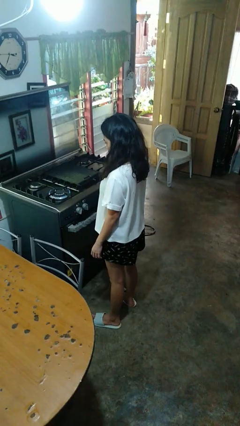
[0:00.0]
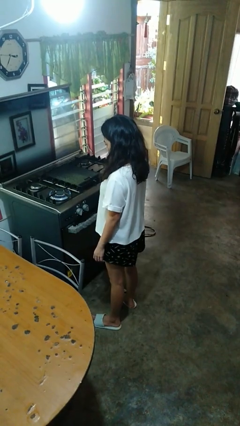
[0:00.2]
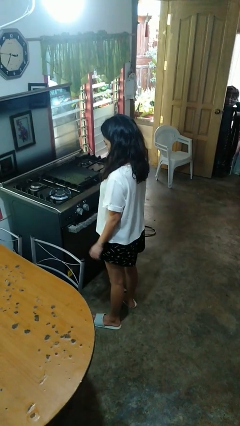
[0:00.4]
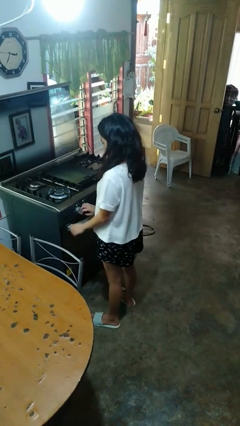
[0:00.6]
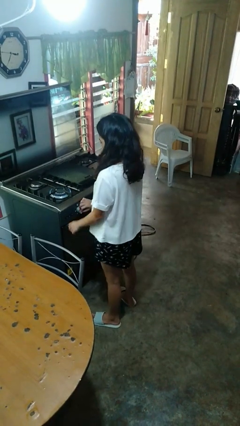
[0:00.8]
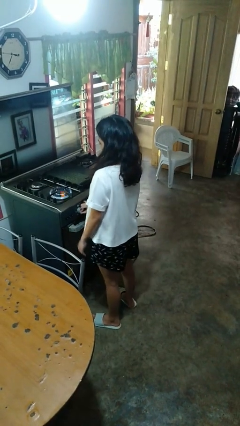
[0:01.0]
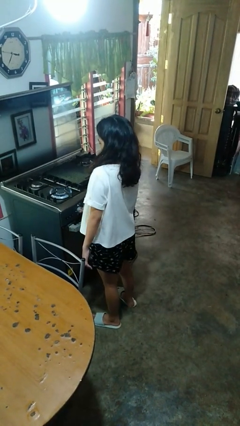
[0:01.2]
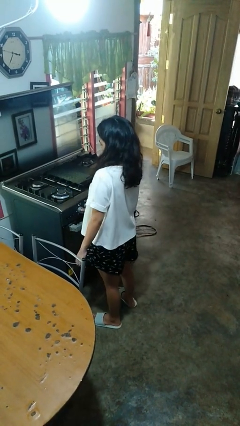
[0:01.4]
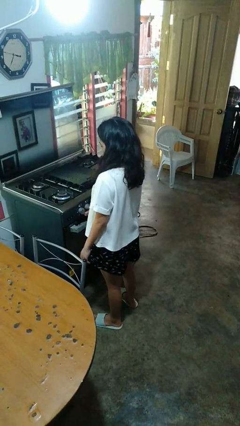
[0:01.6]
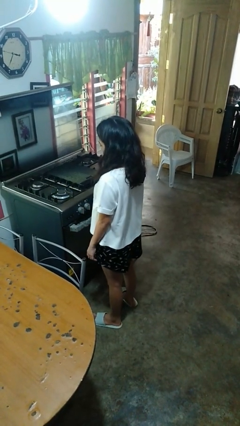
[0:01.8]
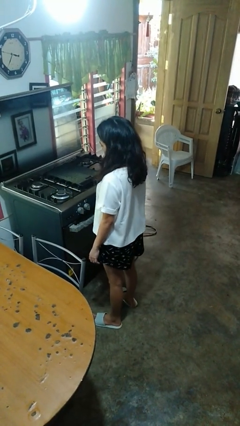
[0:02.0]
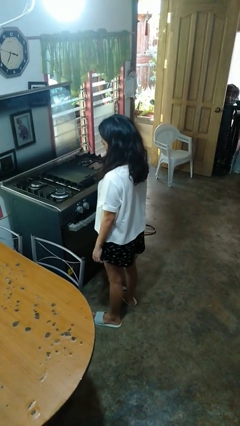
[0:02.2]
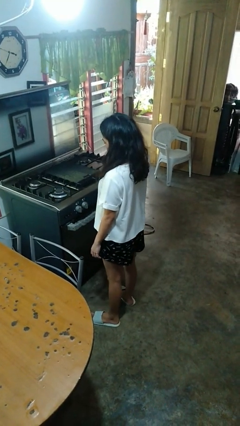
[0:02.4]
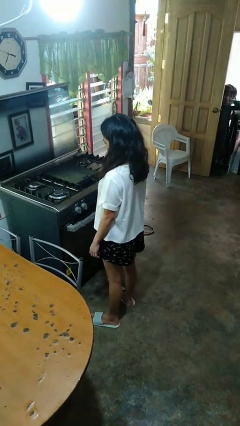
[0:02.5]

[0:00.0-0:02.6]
person turns off stovetop

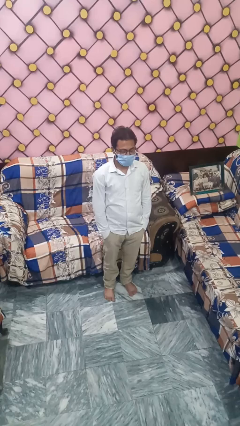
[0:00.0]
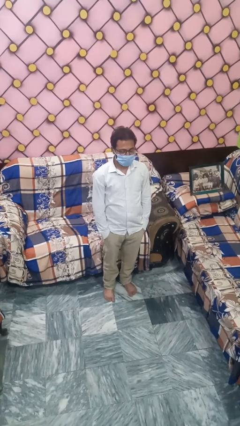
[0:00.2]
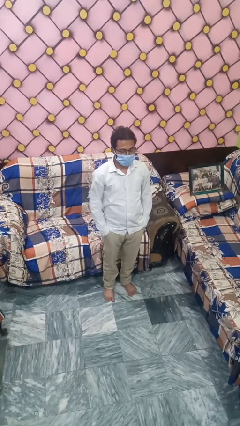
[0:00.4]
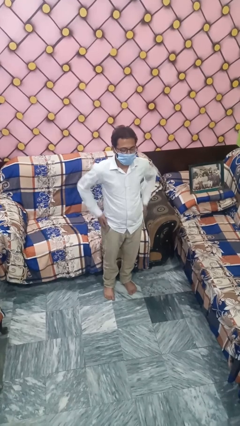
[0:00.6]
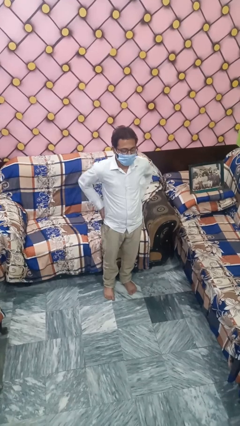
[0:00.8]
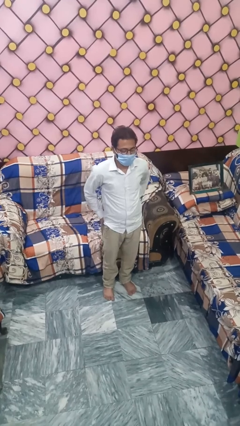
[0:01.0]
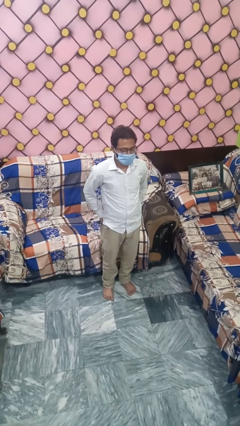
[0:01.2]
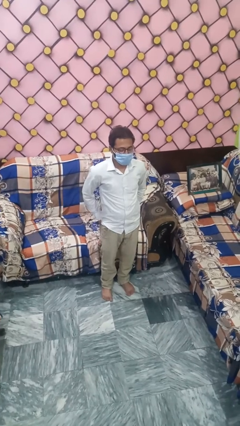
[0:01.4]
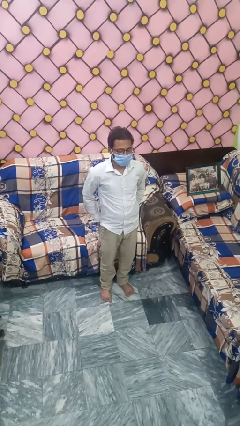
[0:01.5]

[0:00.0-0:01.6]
person puts hands in back pockets

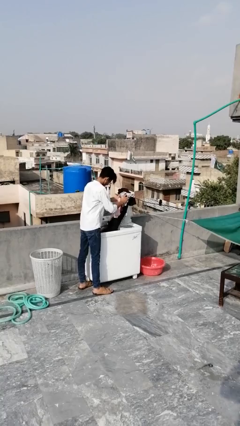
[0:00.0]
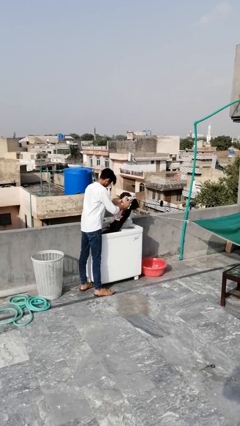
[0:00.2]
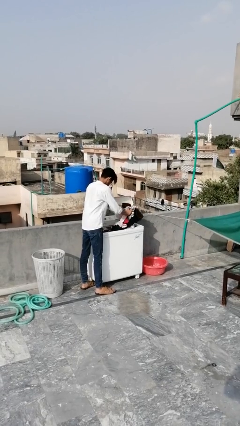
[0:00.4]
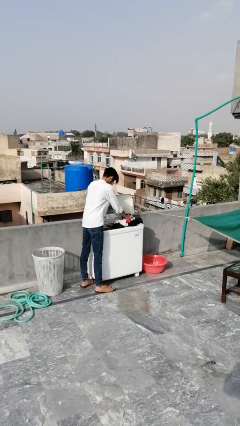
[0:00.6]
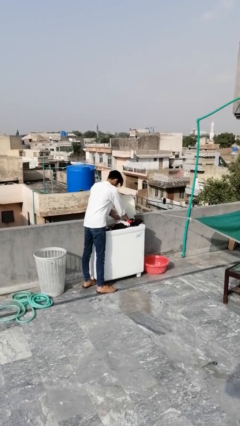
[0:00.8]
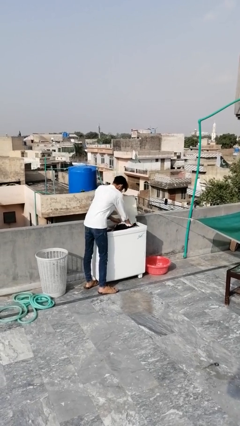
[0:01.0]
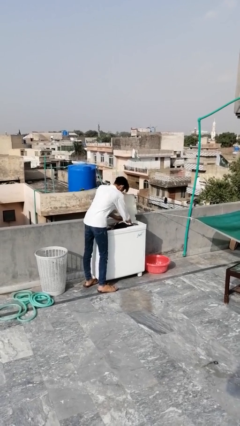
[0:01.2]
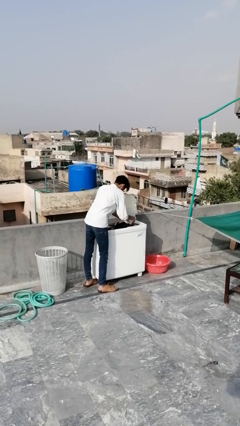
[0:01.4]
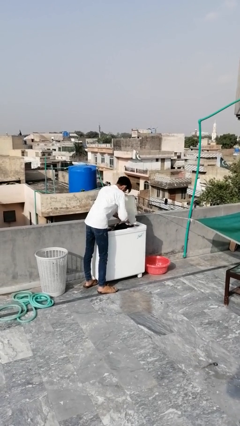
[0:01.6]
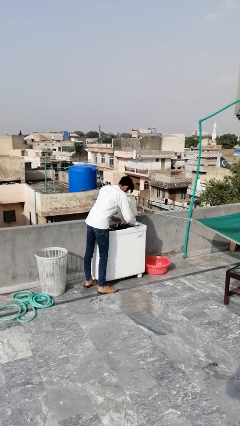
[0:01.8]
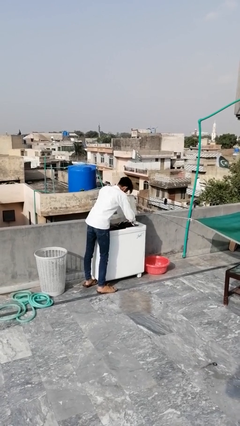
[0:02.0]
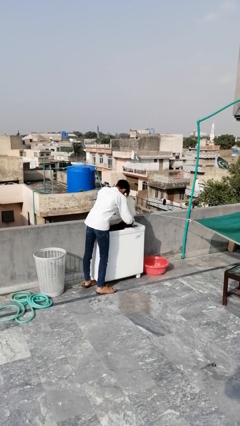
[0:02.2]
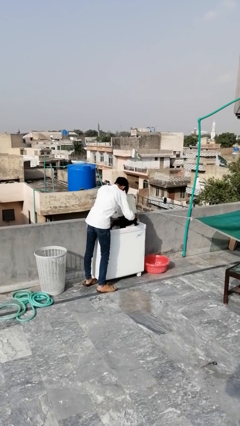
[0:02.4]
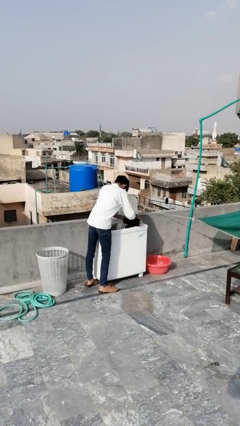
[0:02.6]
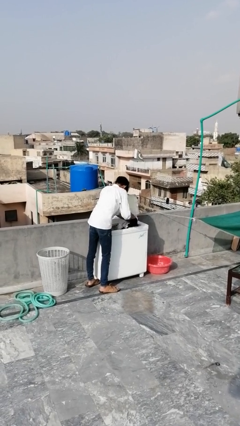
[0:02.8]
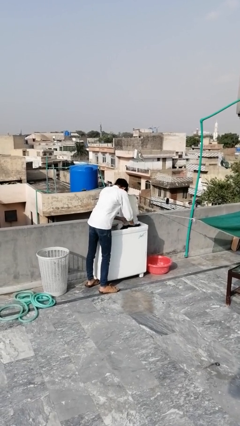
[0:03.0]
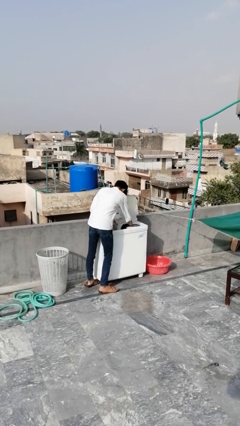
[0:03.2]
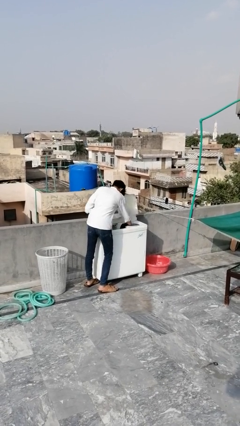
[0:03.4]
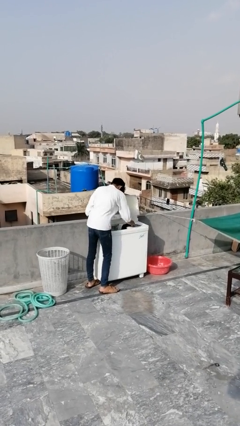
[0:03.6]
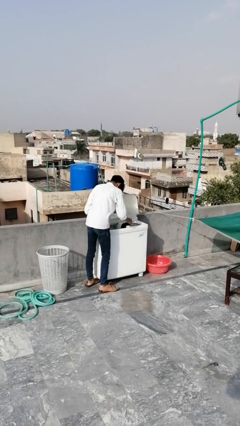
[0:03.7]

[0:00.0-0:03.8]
person loads dryer

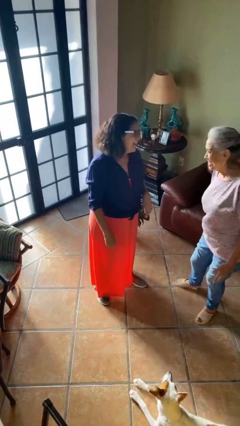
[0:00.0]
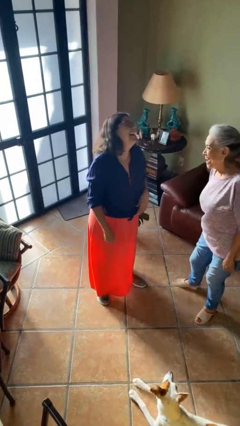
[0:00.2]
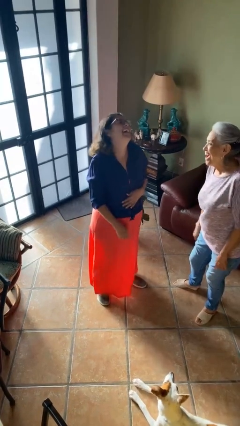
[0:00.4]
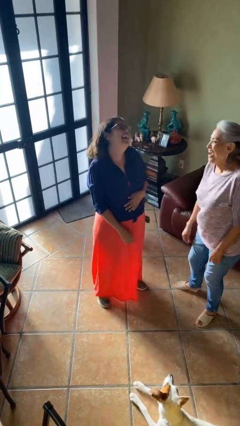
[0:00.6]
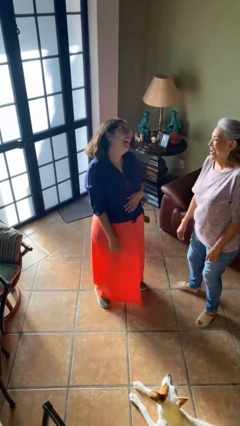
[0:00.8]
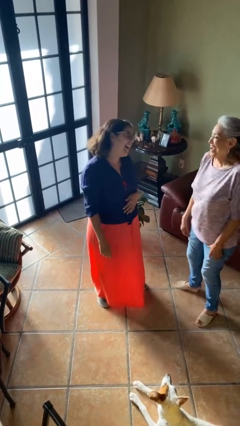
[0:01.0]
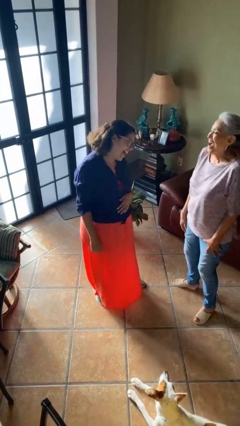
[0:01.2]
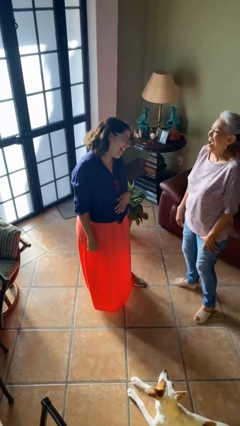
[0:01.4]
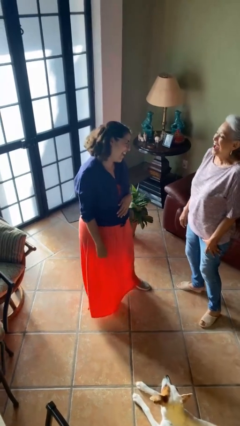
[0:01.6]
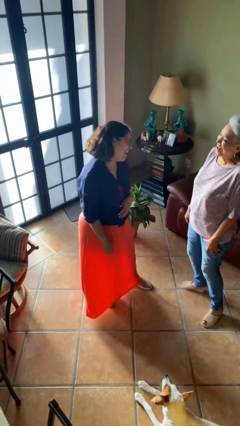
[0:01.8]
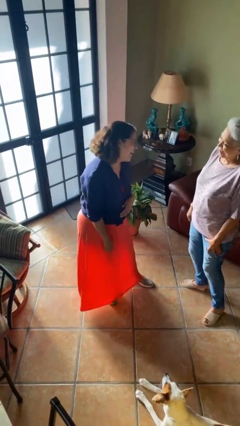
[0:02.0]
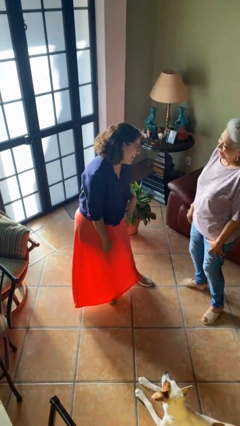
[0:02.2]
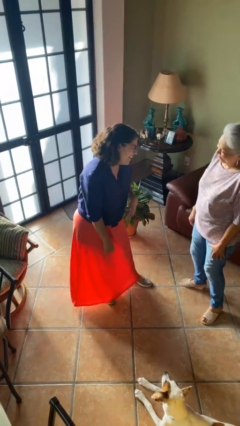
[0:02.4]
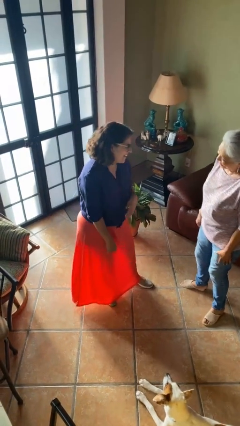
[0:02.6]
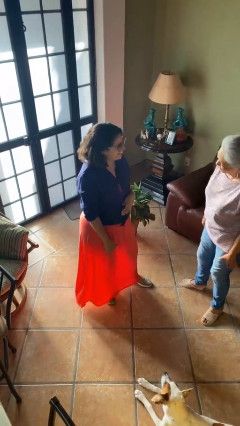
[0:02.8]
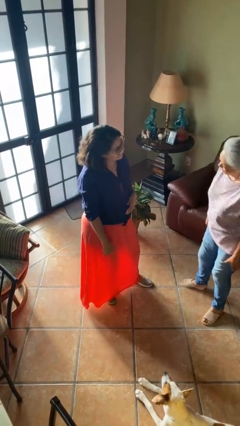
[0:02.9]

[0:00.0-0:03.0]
person laughs with person

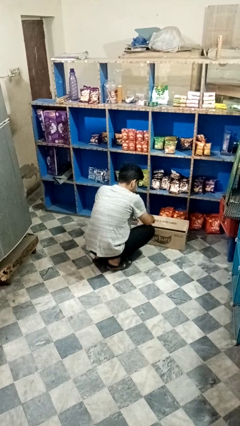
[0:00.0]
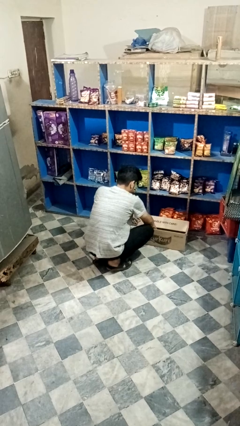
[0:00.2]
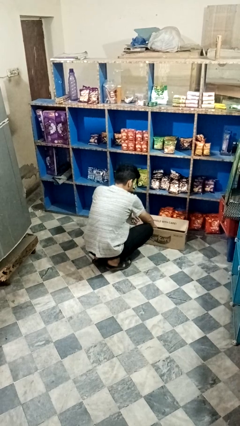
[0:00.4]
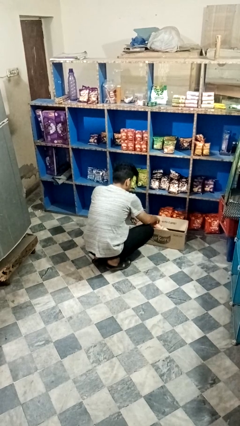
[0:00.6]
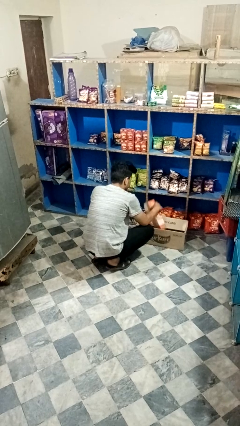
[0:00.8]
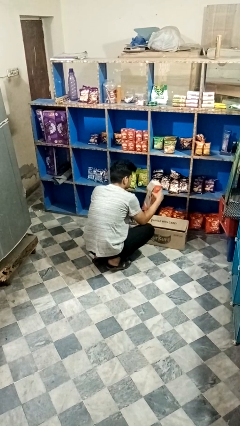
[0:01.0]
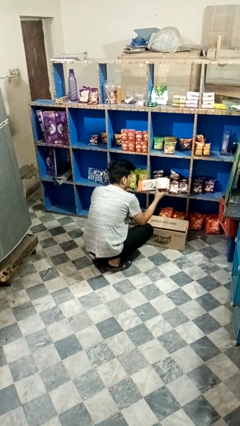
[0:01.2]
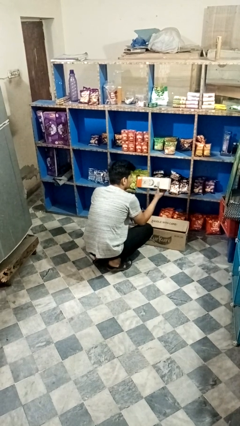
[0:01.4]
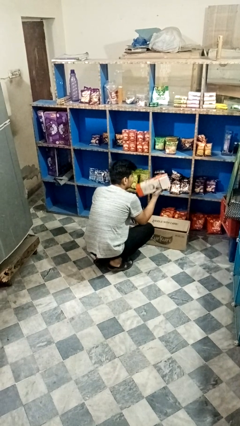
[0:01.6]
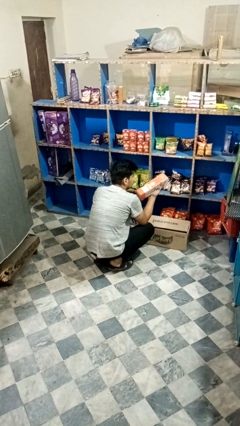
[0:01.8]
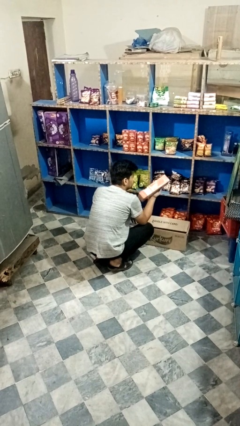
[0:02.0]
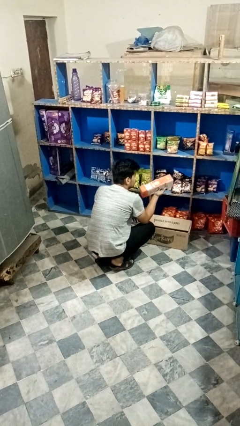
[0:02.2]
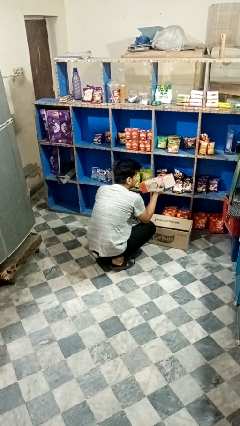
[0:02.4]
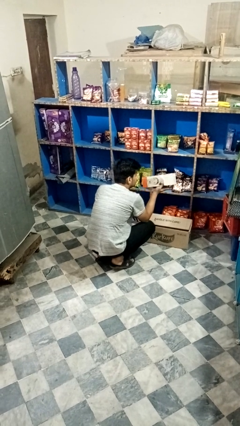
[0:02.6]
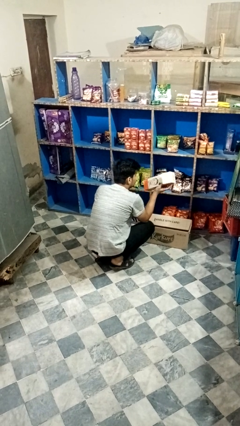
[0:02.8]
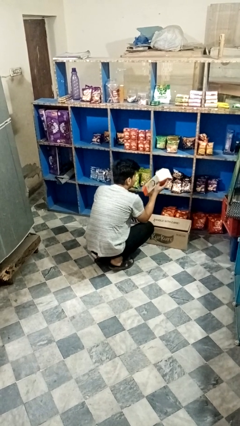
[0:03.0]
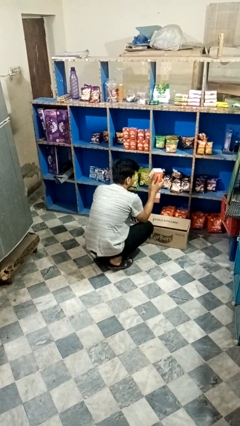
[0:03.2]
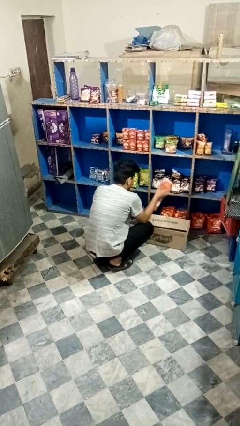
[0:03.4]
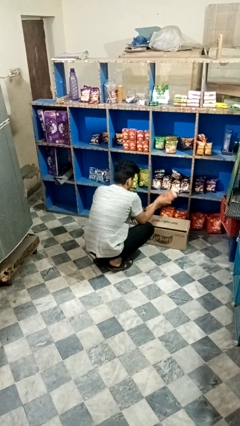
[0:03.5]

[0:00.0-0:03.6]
person takes object from box

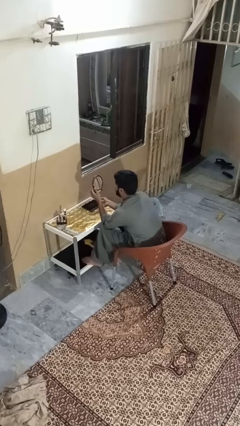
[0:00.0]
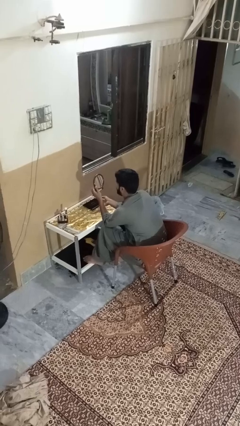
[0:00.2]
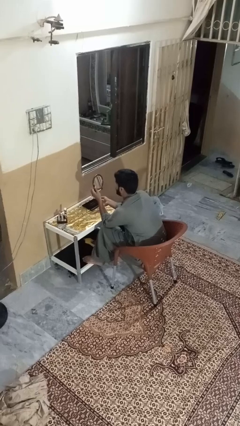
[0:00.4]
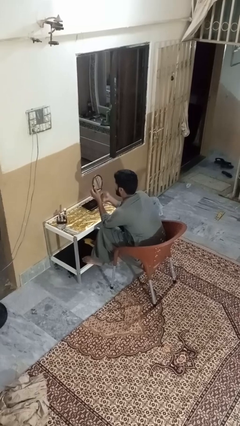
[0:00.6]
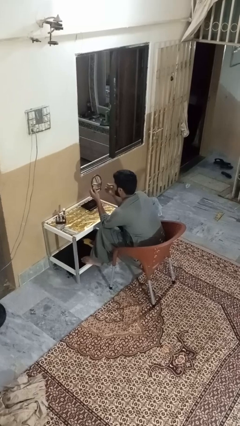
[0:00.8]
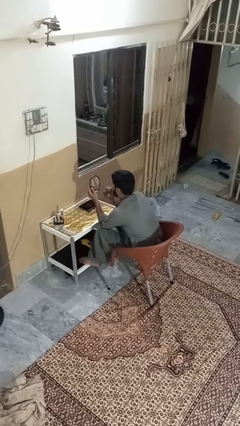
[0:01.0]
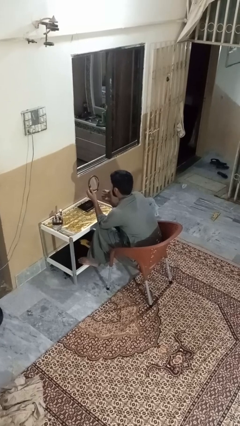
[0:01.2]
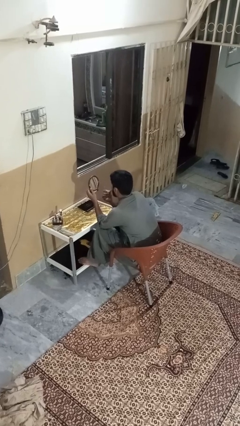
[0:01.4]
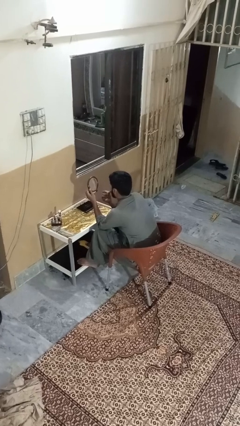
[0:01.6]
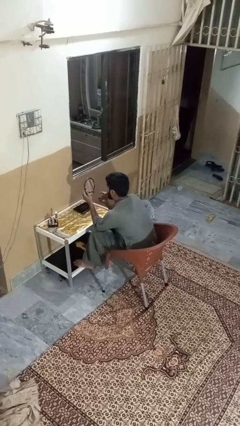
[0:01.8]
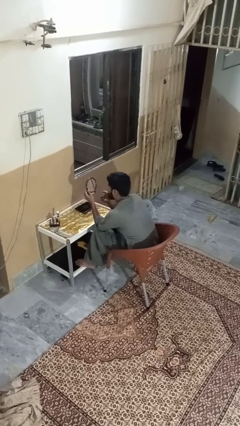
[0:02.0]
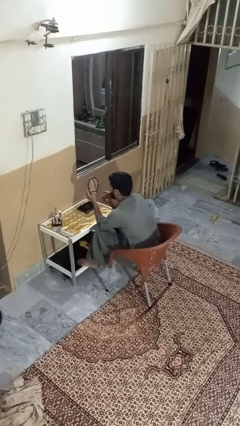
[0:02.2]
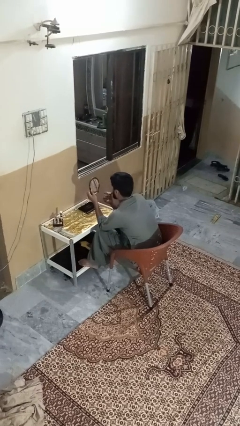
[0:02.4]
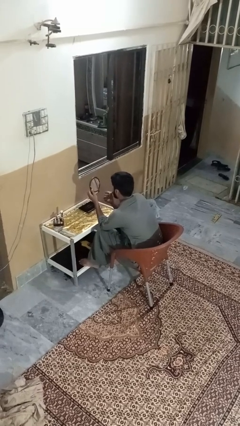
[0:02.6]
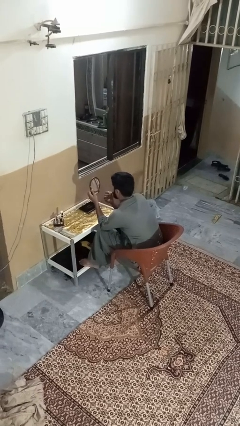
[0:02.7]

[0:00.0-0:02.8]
person applies lip makeup
